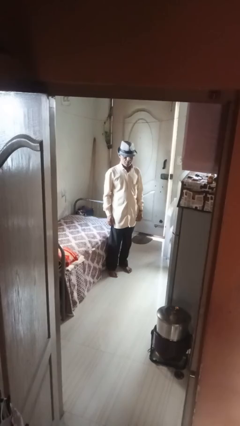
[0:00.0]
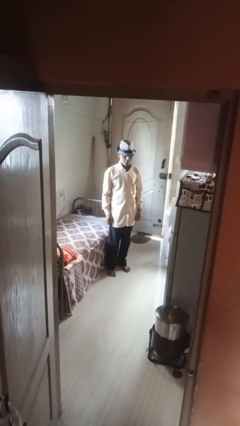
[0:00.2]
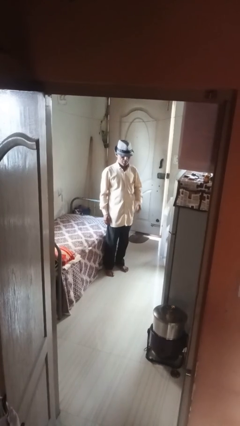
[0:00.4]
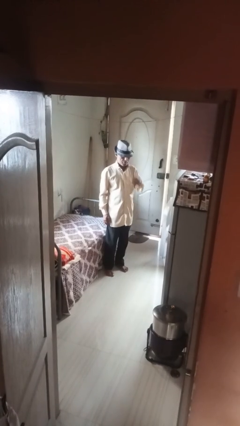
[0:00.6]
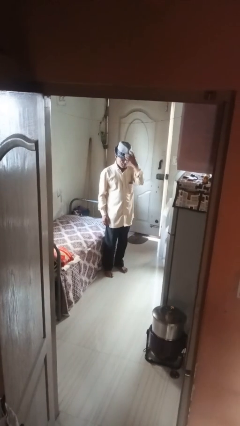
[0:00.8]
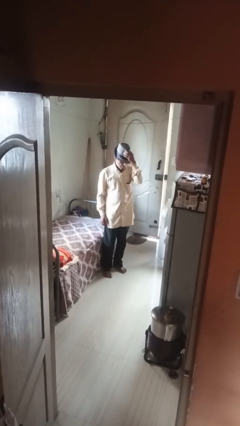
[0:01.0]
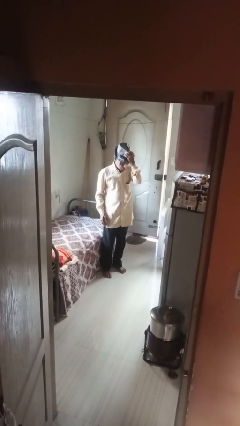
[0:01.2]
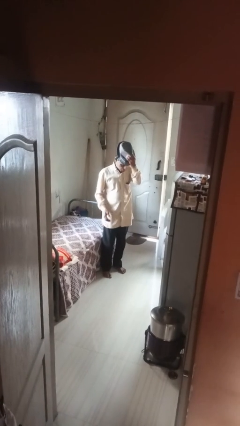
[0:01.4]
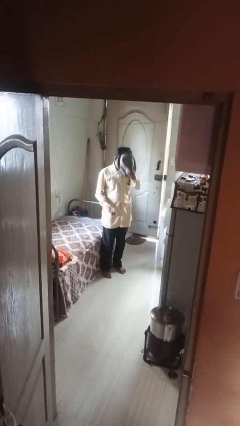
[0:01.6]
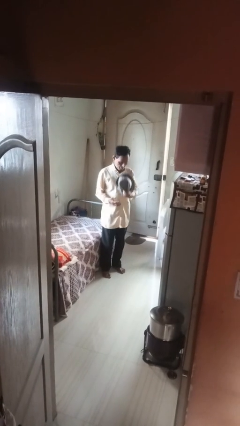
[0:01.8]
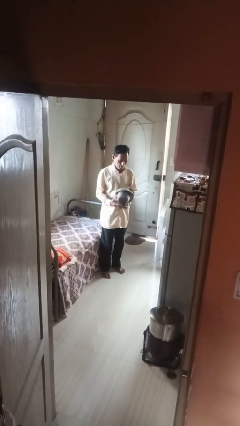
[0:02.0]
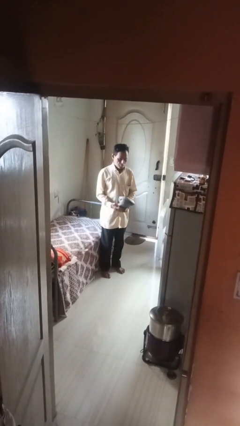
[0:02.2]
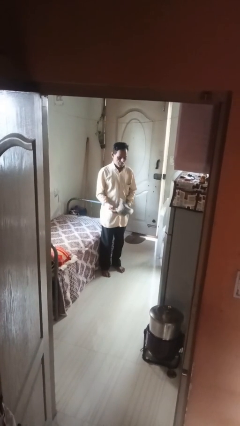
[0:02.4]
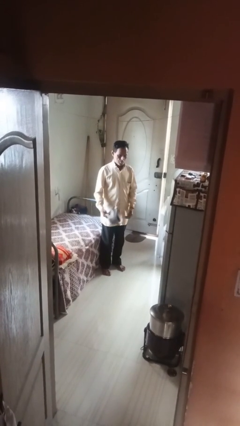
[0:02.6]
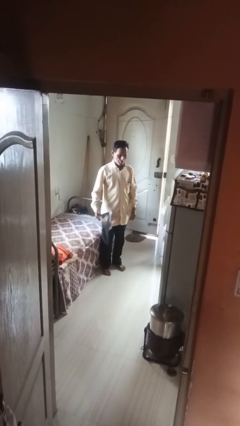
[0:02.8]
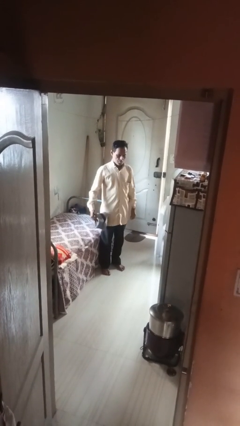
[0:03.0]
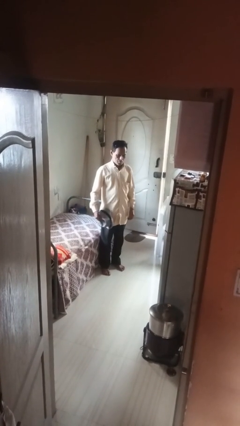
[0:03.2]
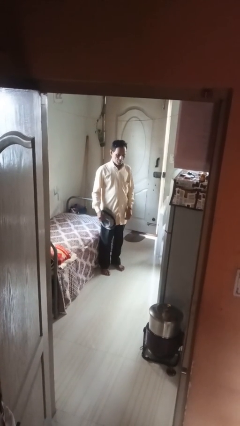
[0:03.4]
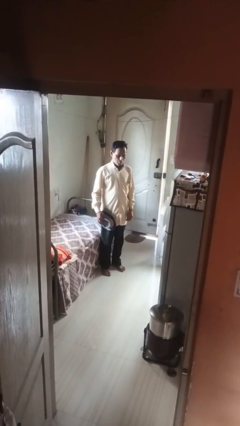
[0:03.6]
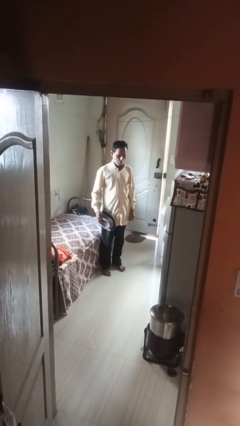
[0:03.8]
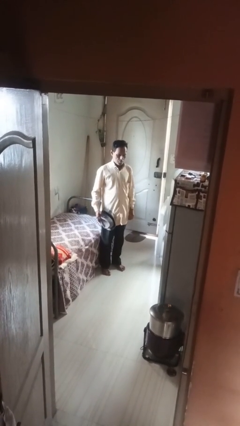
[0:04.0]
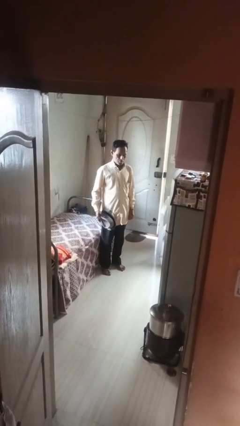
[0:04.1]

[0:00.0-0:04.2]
person takes off hat

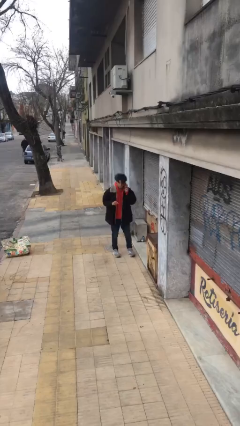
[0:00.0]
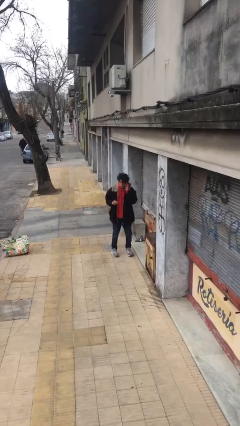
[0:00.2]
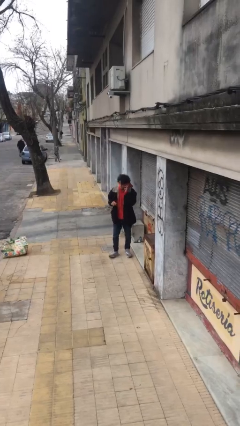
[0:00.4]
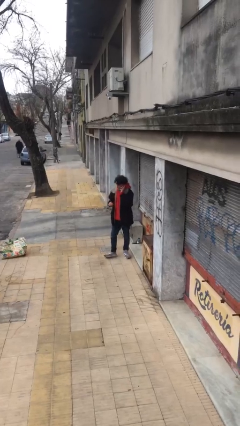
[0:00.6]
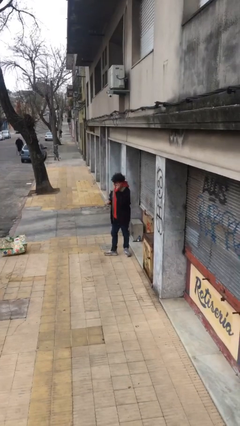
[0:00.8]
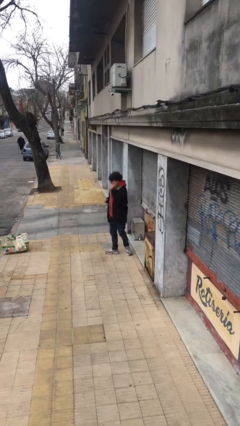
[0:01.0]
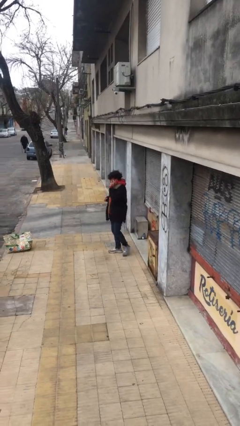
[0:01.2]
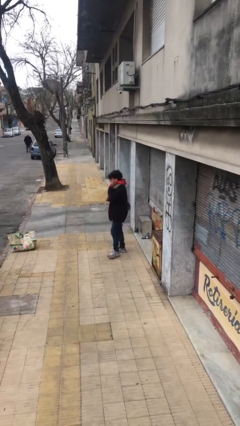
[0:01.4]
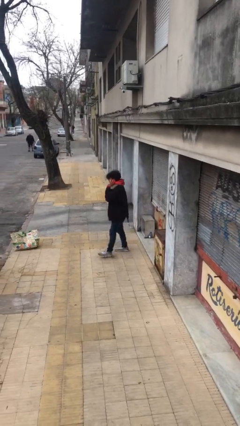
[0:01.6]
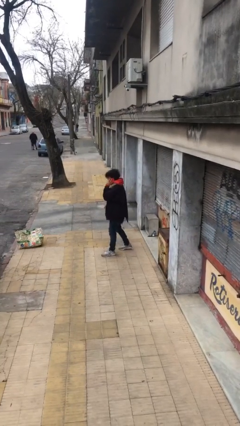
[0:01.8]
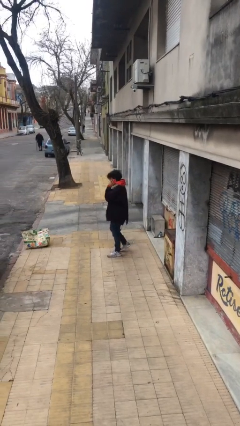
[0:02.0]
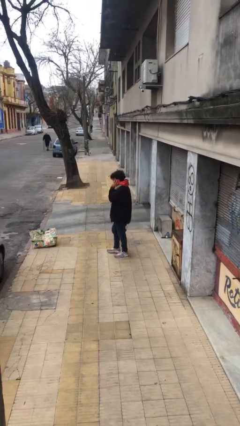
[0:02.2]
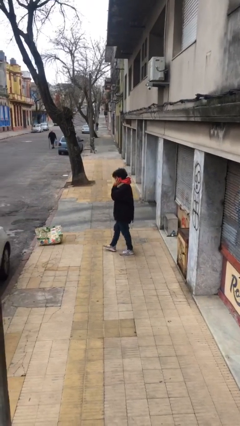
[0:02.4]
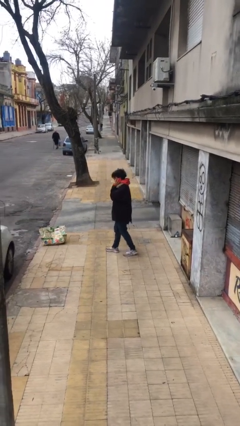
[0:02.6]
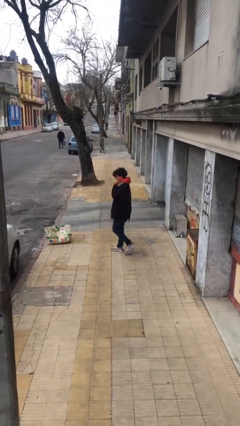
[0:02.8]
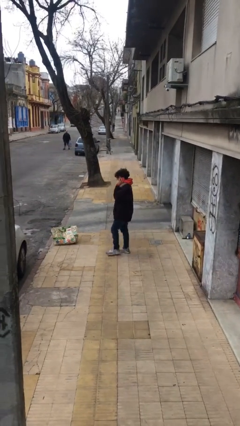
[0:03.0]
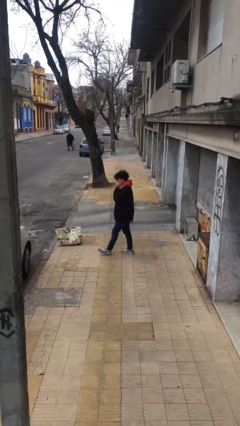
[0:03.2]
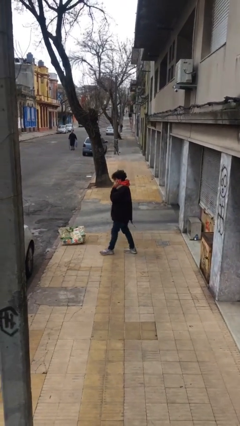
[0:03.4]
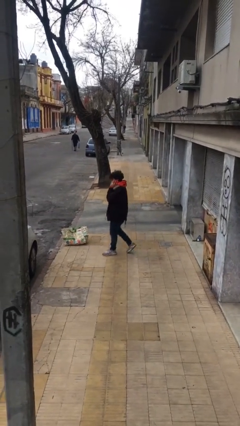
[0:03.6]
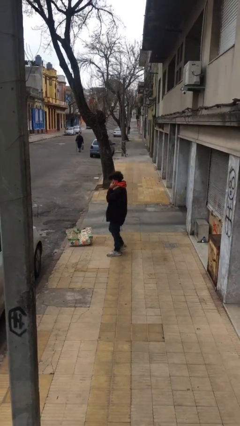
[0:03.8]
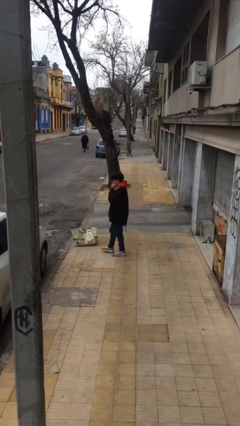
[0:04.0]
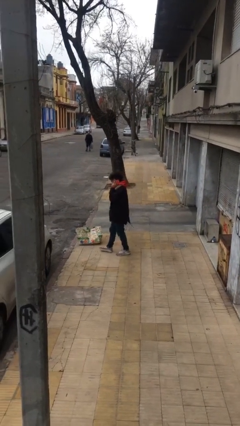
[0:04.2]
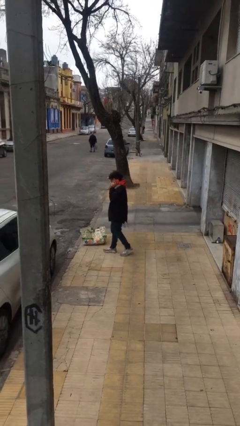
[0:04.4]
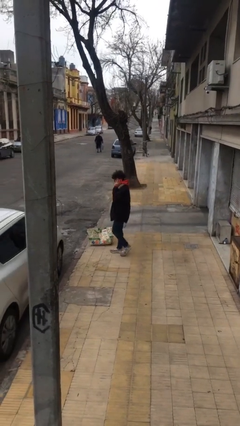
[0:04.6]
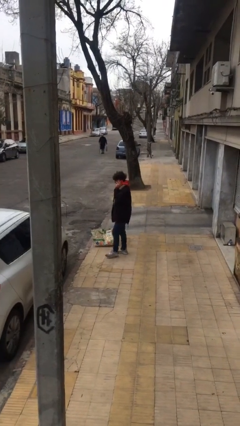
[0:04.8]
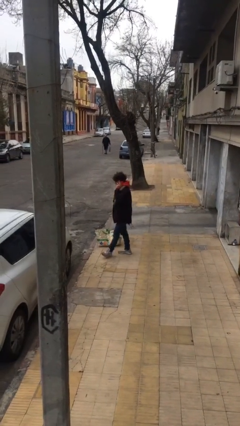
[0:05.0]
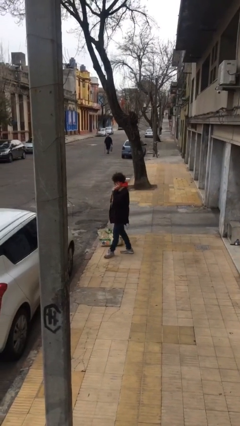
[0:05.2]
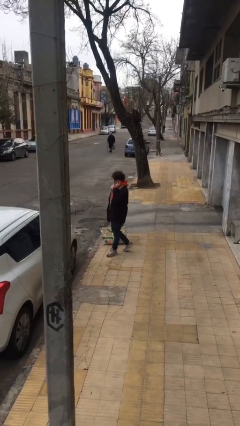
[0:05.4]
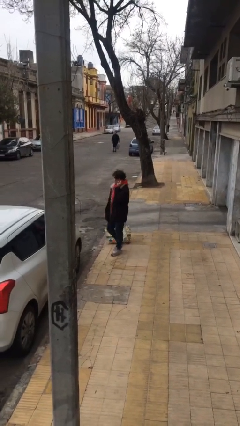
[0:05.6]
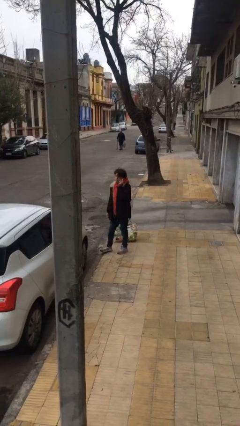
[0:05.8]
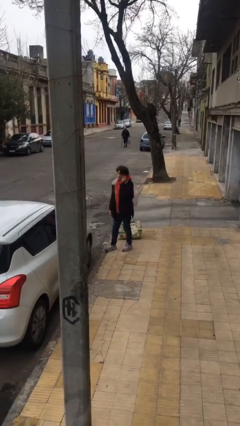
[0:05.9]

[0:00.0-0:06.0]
person talks on phone

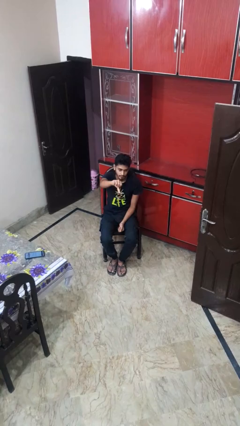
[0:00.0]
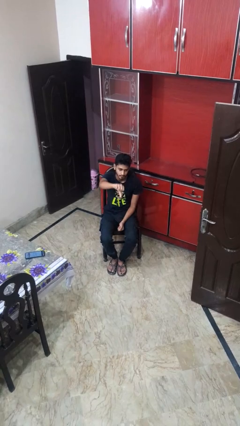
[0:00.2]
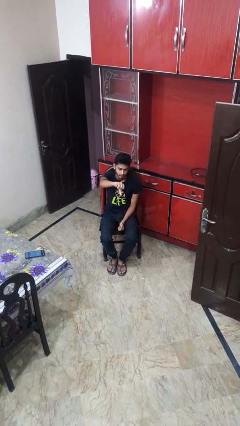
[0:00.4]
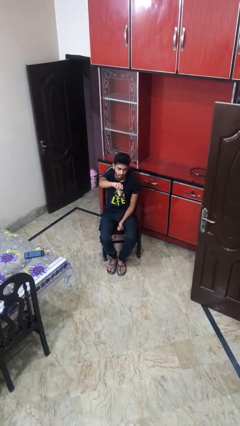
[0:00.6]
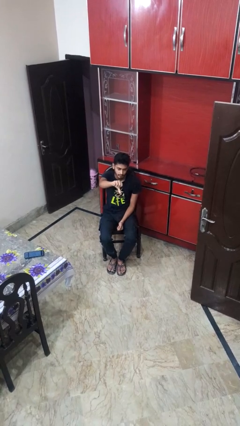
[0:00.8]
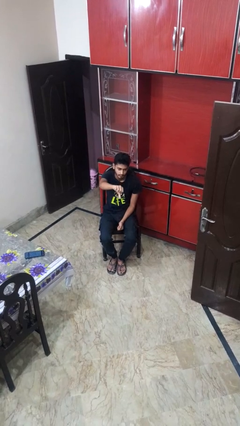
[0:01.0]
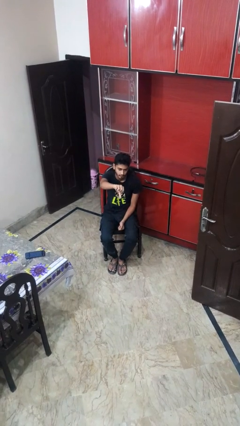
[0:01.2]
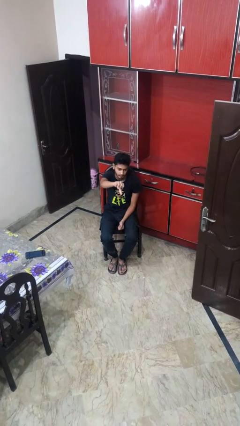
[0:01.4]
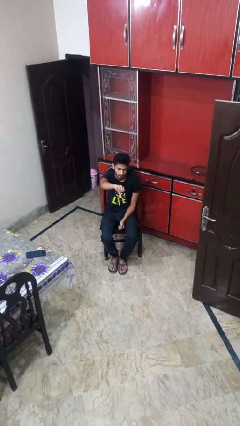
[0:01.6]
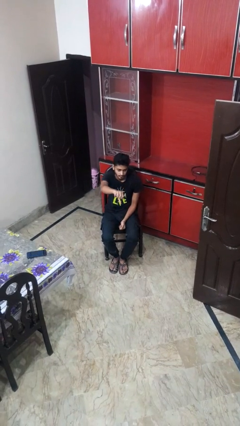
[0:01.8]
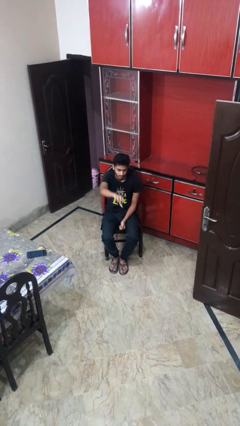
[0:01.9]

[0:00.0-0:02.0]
person gestures thumbs down

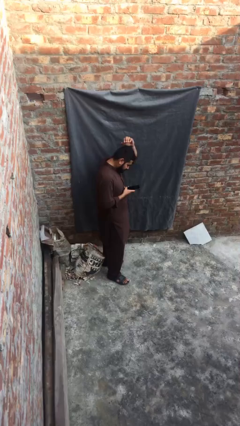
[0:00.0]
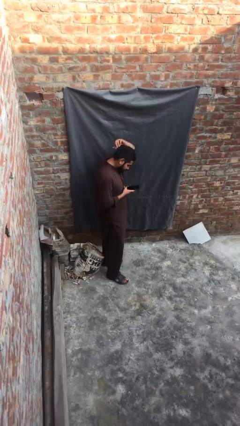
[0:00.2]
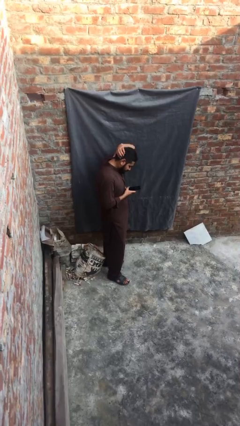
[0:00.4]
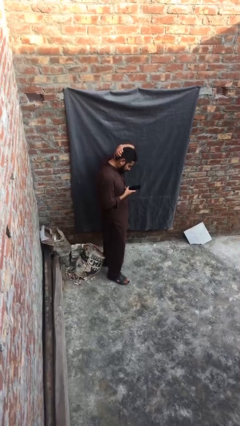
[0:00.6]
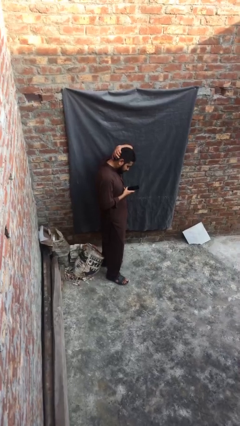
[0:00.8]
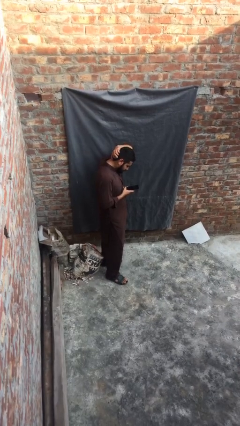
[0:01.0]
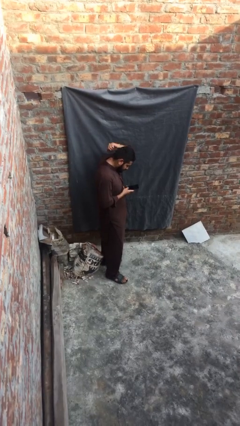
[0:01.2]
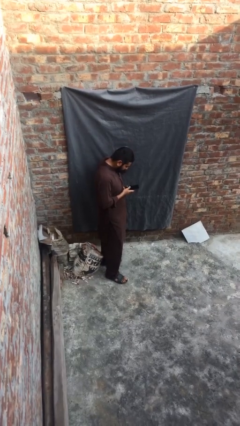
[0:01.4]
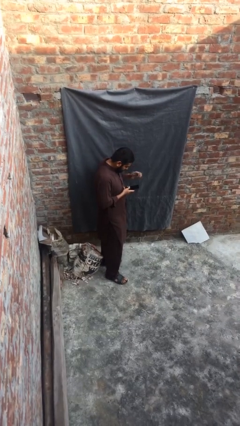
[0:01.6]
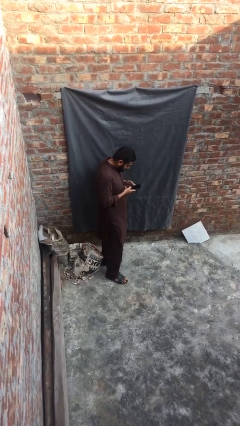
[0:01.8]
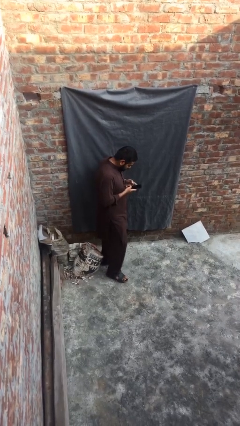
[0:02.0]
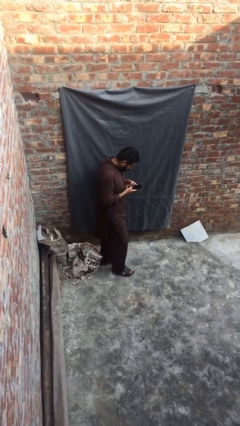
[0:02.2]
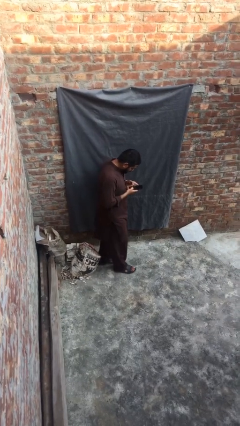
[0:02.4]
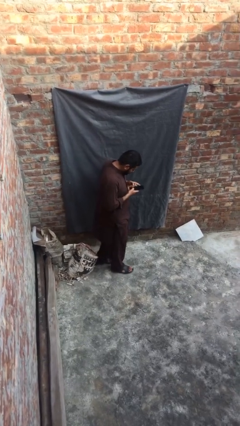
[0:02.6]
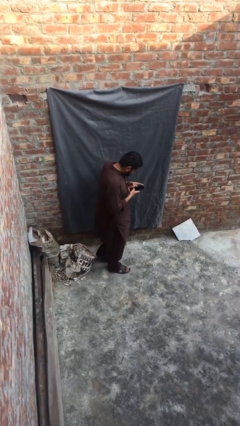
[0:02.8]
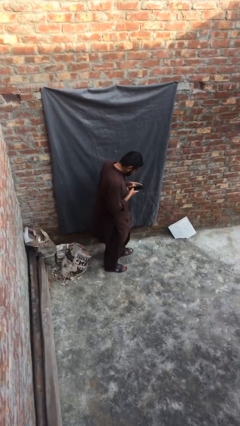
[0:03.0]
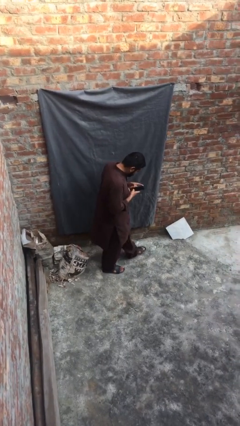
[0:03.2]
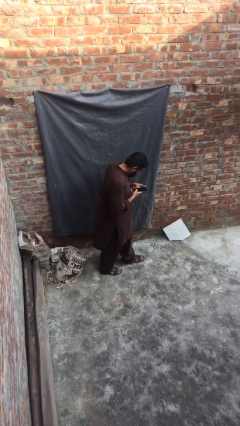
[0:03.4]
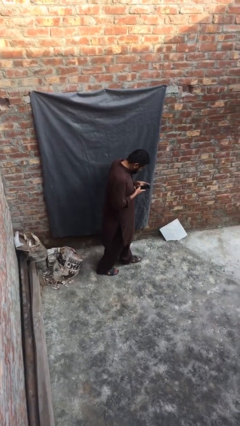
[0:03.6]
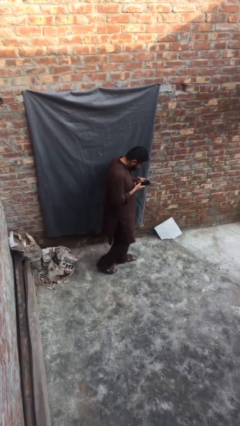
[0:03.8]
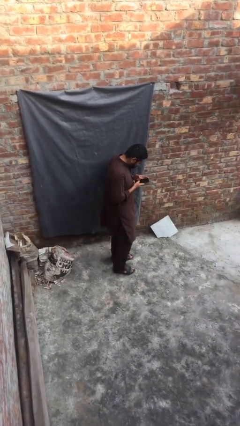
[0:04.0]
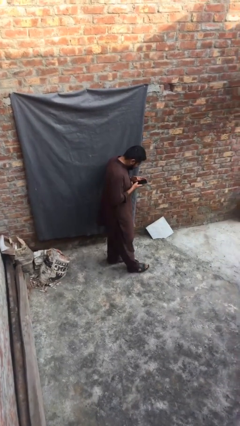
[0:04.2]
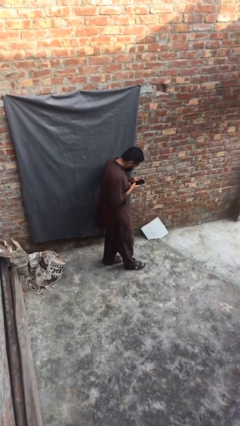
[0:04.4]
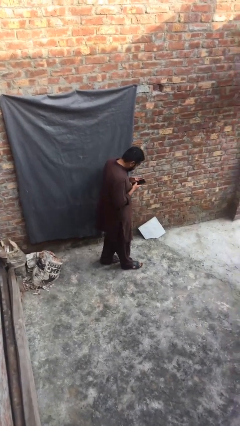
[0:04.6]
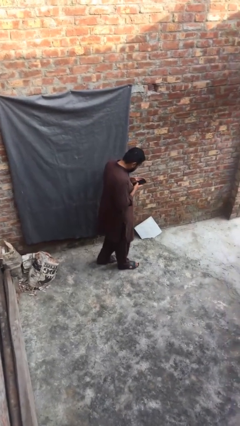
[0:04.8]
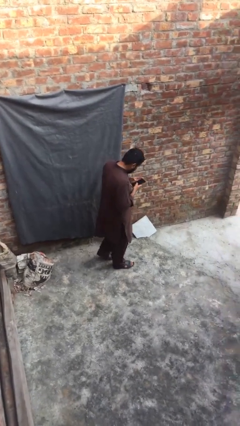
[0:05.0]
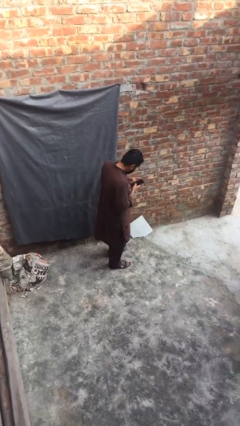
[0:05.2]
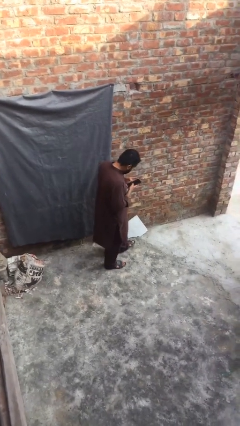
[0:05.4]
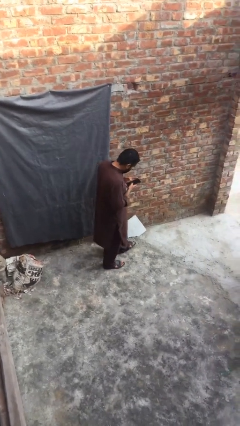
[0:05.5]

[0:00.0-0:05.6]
person texts on phone
